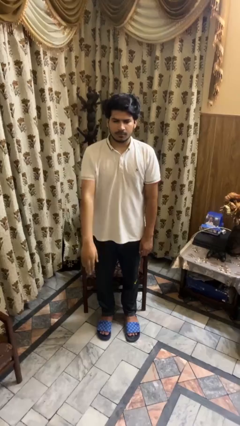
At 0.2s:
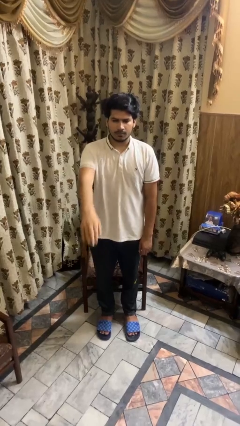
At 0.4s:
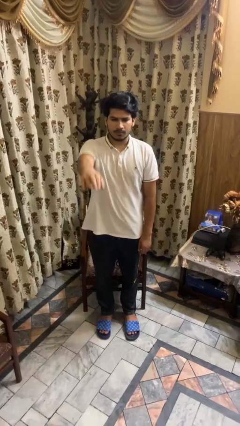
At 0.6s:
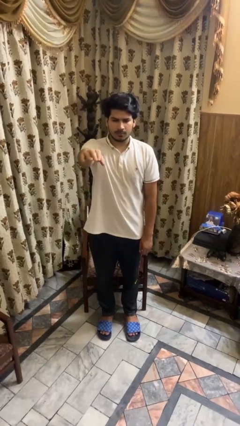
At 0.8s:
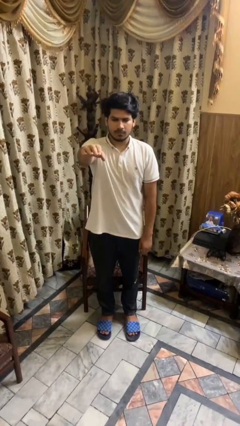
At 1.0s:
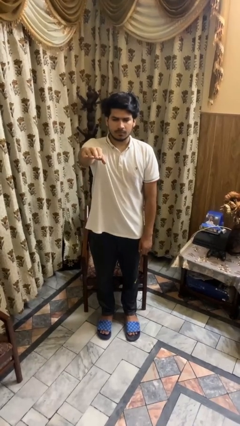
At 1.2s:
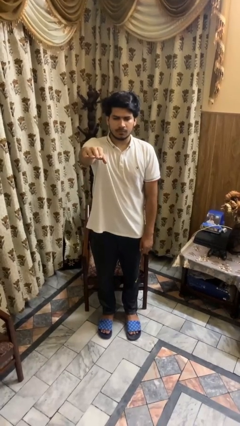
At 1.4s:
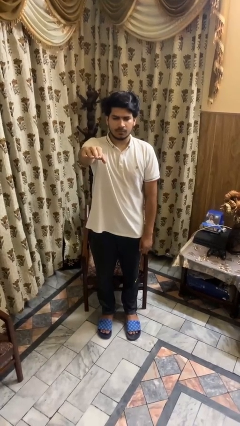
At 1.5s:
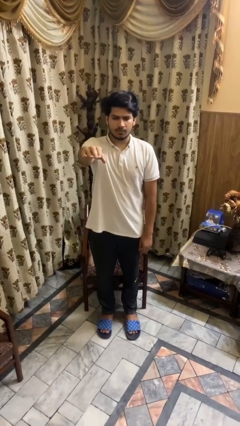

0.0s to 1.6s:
person gestures swipe up

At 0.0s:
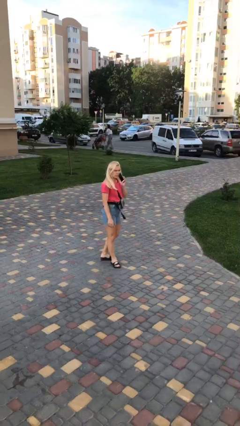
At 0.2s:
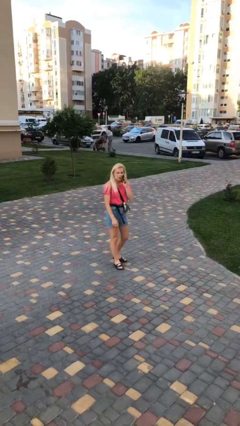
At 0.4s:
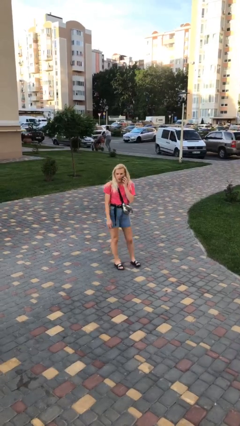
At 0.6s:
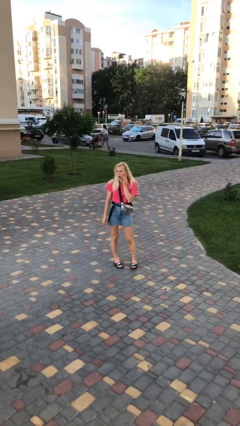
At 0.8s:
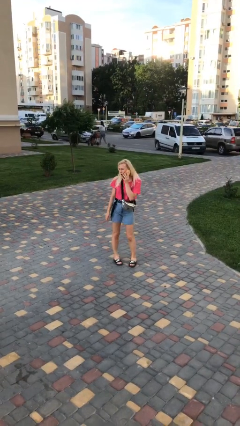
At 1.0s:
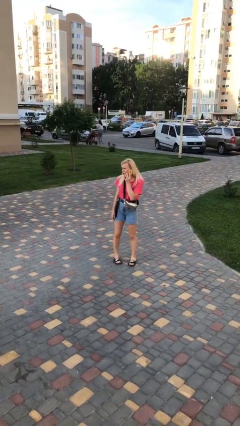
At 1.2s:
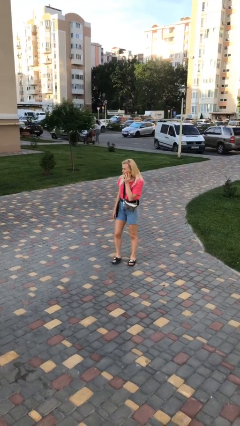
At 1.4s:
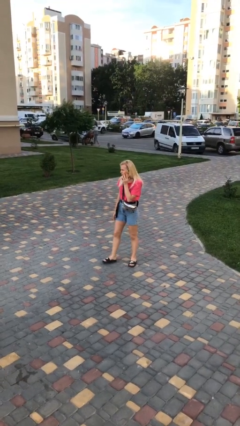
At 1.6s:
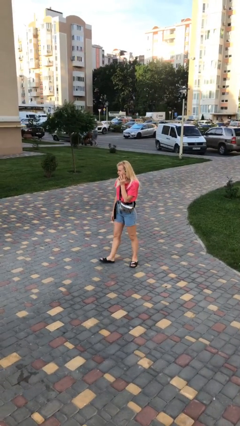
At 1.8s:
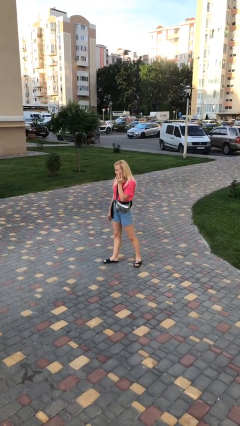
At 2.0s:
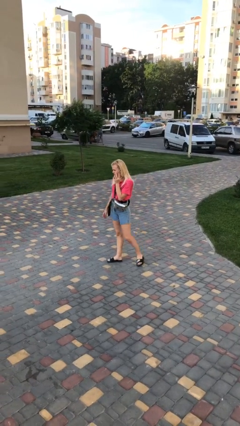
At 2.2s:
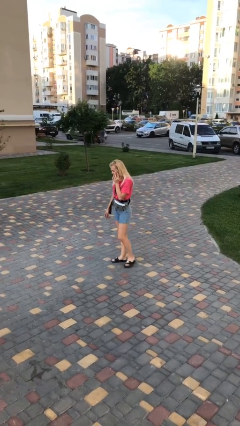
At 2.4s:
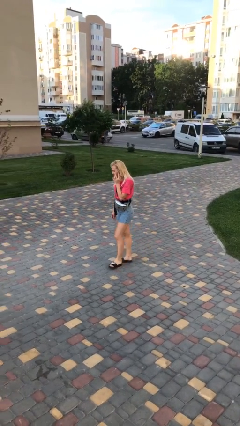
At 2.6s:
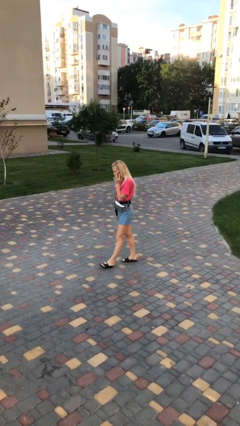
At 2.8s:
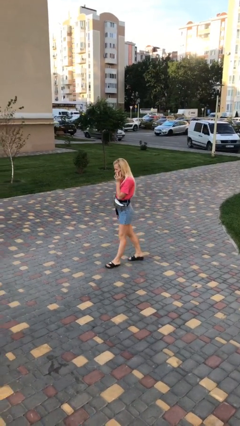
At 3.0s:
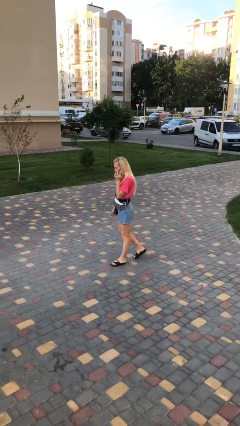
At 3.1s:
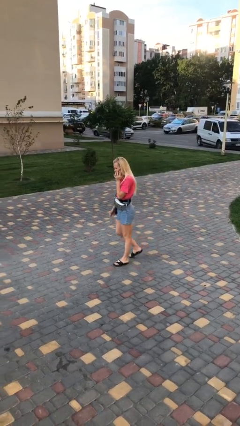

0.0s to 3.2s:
person talks on phone

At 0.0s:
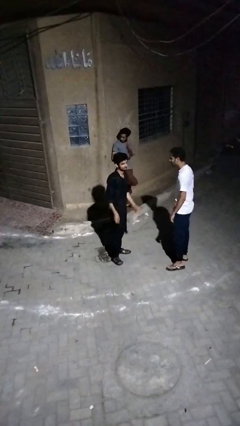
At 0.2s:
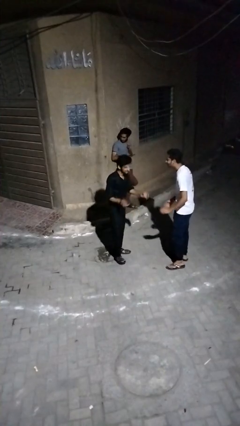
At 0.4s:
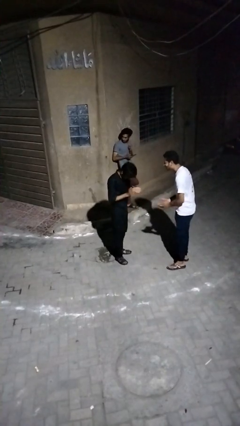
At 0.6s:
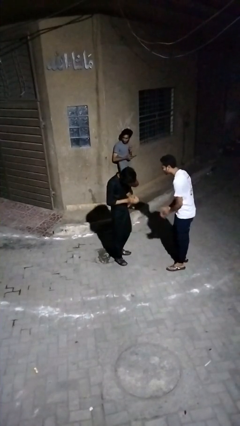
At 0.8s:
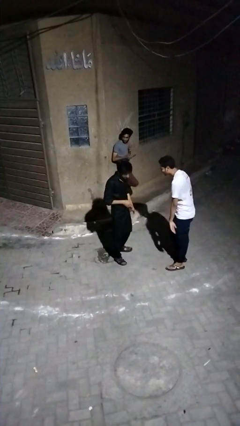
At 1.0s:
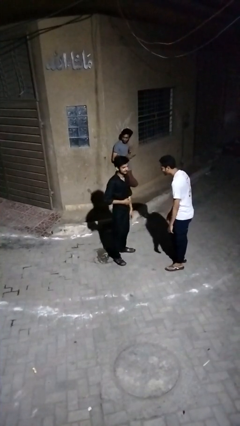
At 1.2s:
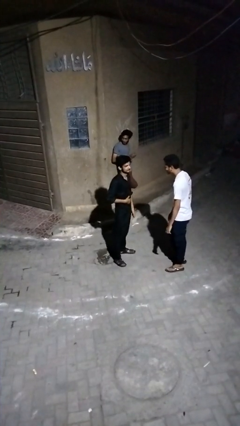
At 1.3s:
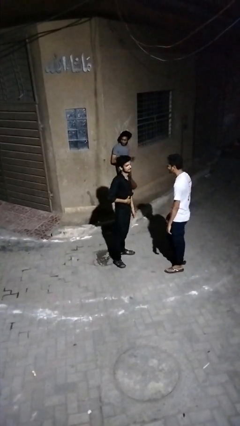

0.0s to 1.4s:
person laughs with person

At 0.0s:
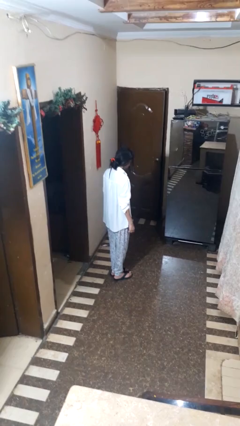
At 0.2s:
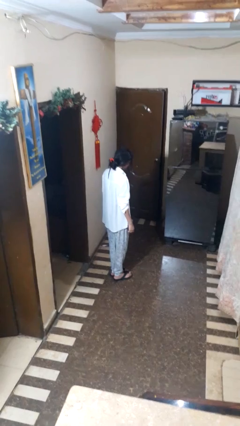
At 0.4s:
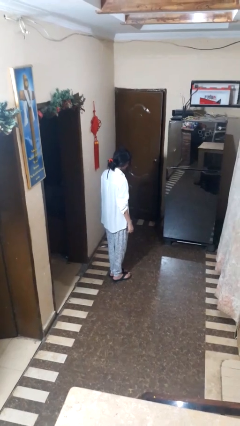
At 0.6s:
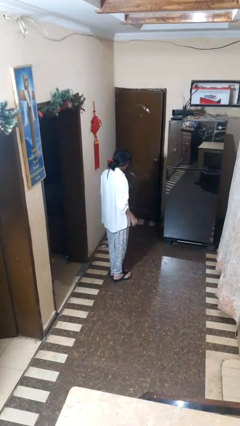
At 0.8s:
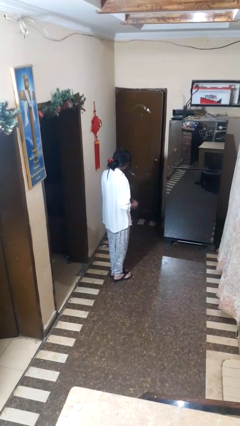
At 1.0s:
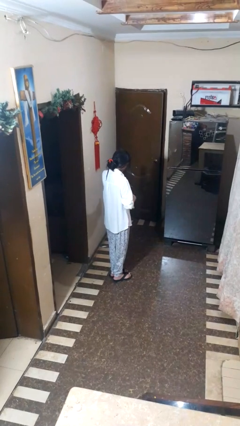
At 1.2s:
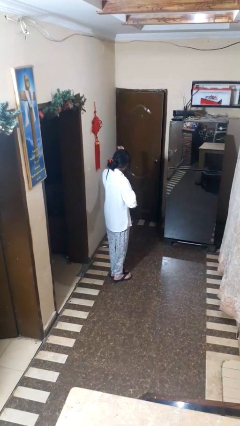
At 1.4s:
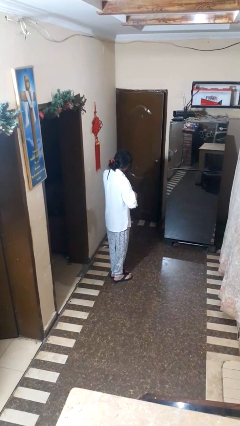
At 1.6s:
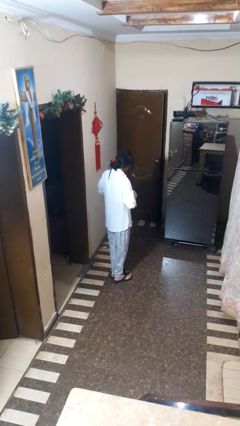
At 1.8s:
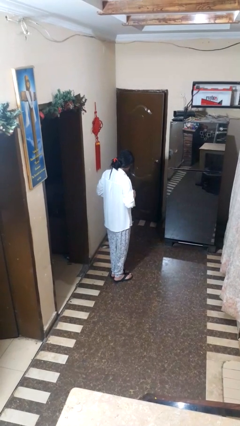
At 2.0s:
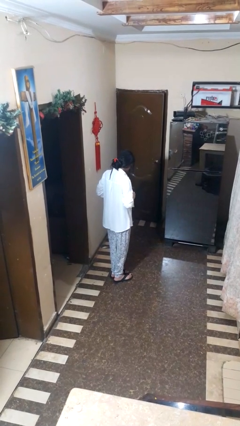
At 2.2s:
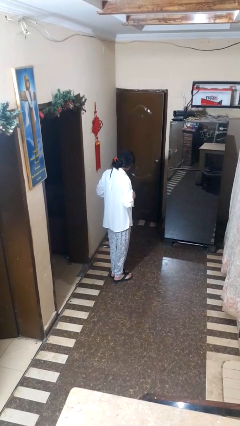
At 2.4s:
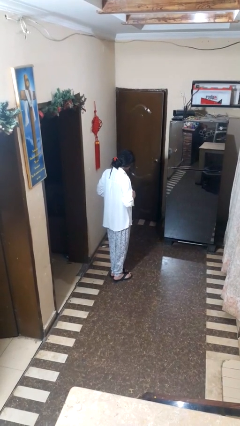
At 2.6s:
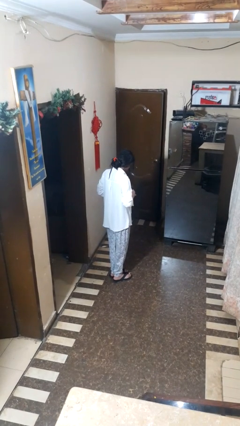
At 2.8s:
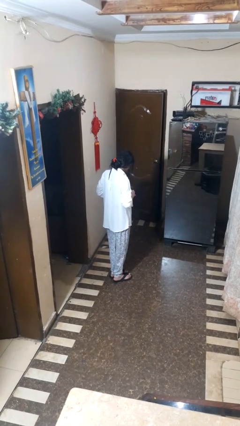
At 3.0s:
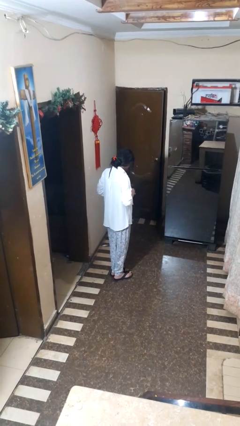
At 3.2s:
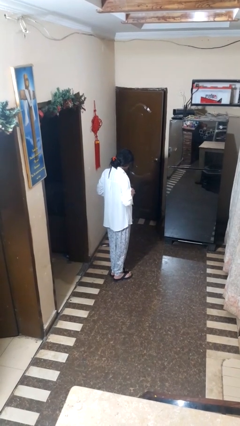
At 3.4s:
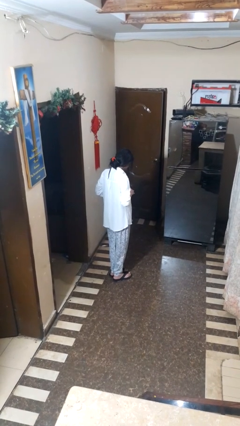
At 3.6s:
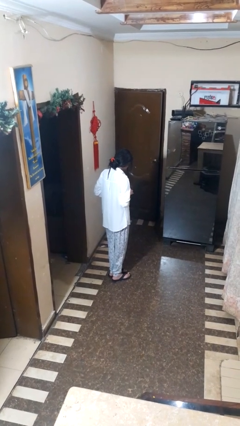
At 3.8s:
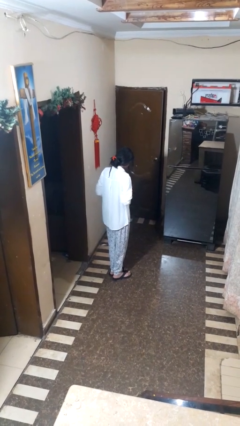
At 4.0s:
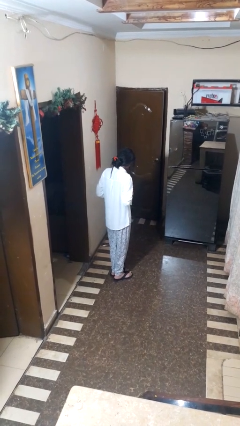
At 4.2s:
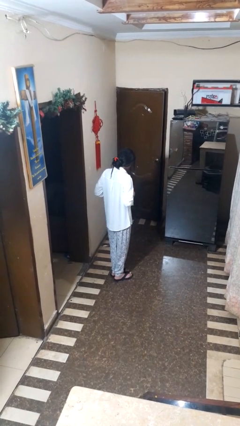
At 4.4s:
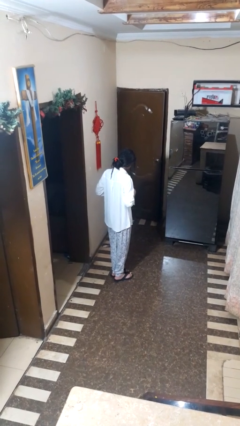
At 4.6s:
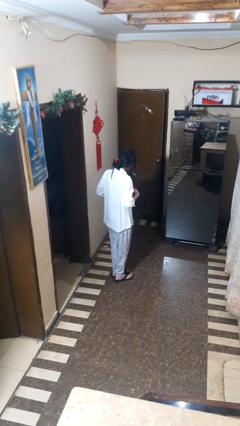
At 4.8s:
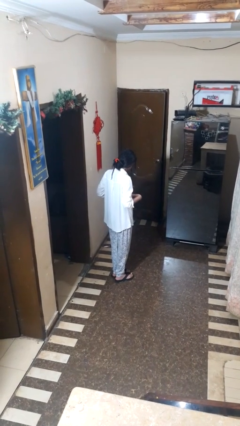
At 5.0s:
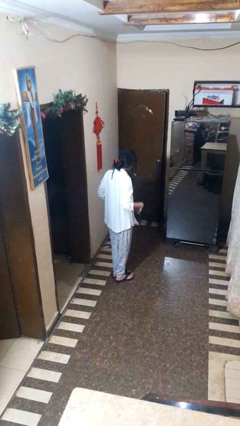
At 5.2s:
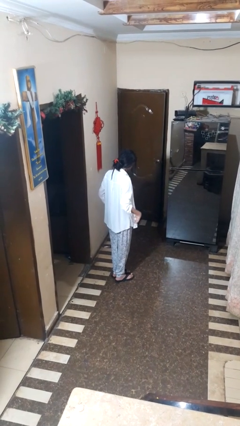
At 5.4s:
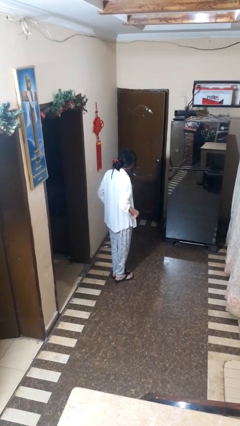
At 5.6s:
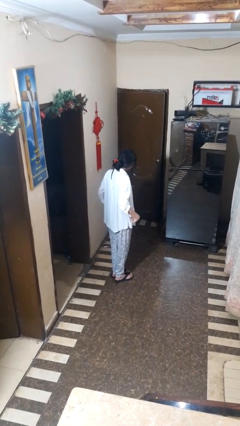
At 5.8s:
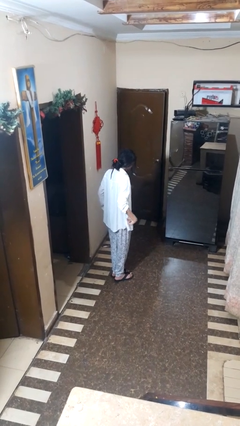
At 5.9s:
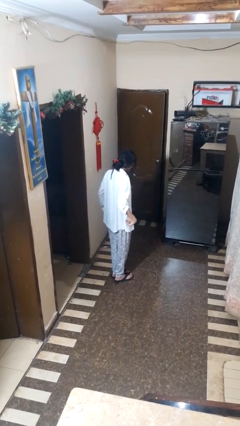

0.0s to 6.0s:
person unbuttons shirt

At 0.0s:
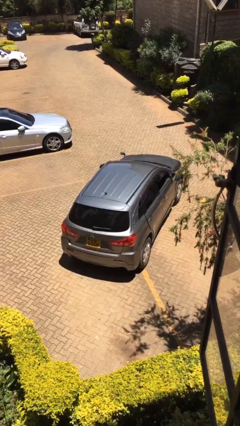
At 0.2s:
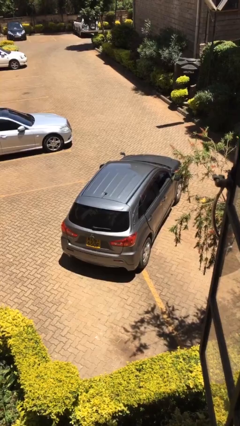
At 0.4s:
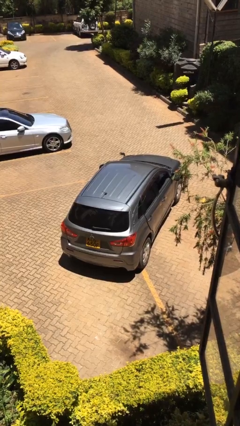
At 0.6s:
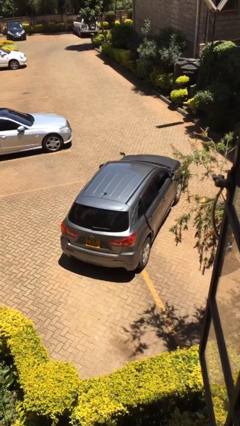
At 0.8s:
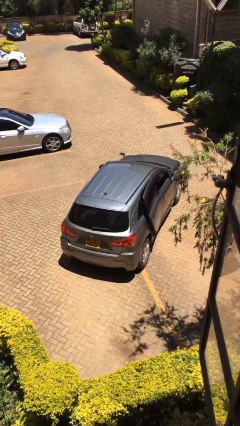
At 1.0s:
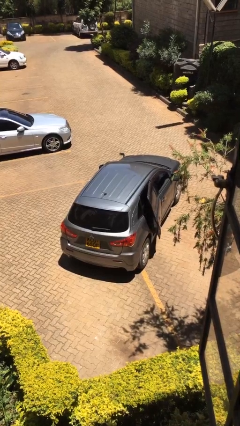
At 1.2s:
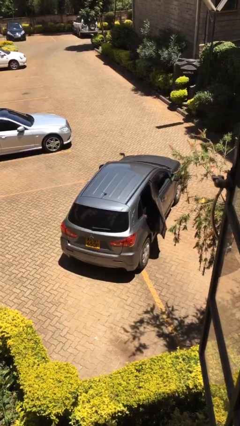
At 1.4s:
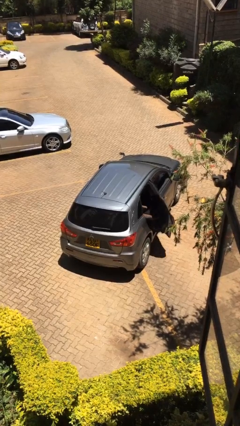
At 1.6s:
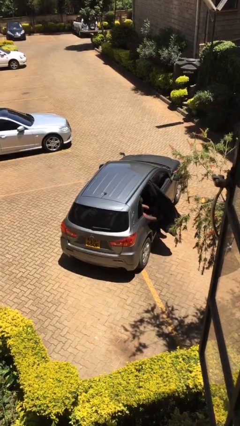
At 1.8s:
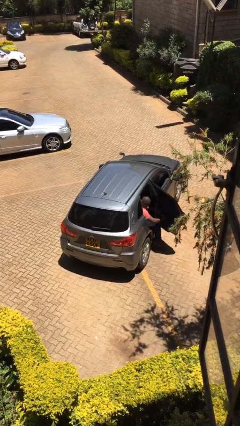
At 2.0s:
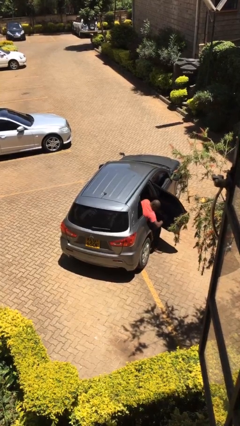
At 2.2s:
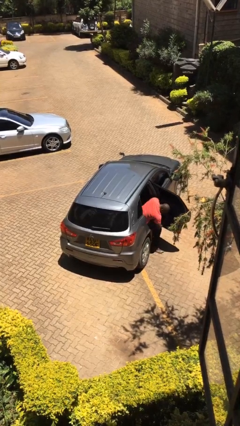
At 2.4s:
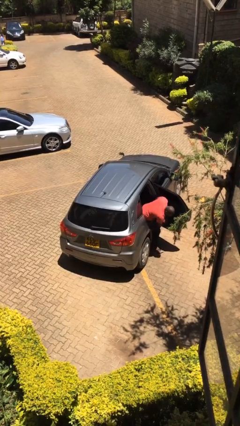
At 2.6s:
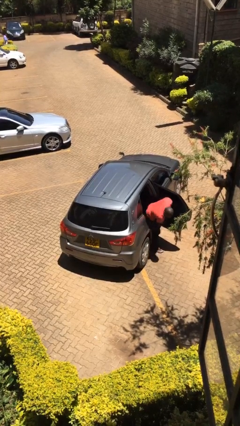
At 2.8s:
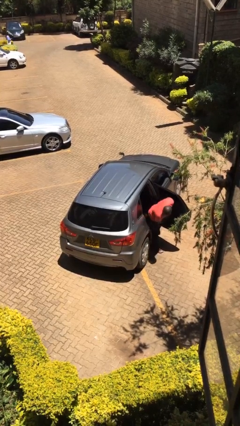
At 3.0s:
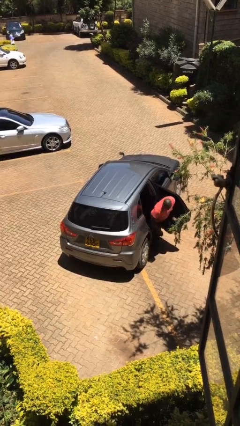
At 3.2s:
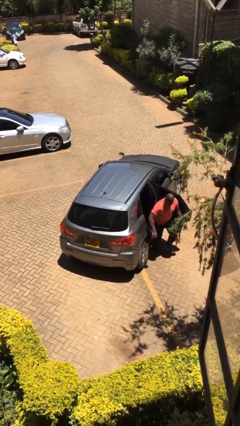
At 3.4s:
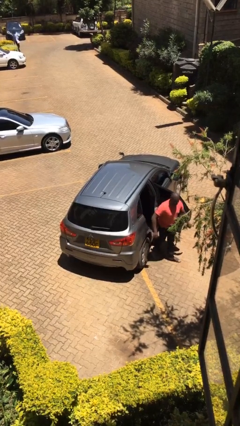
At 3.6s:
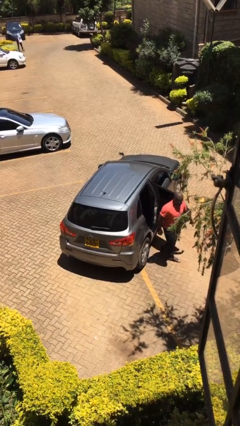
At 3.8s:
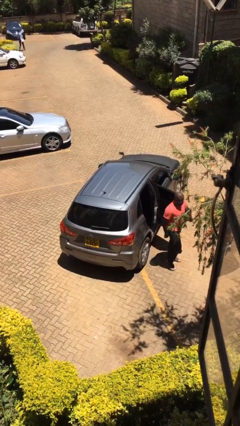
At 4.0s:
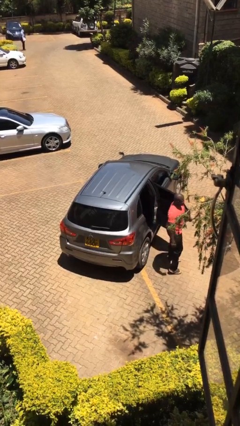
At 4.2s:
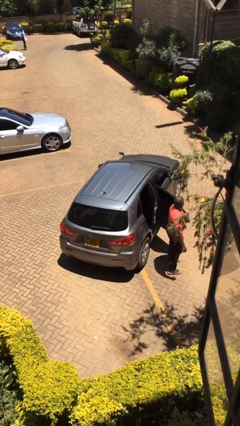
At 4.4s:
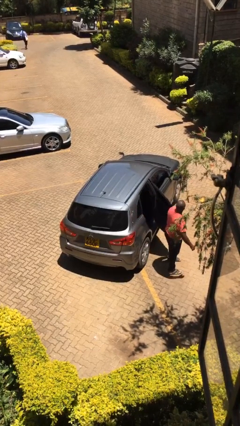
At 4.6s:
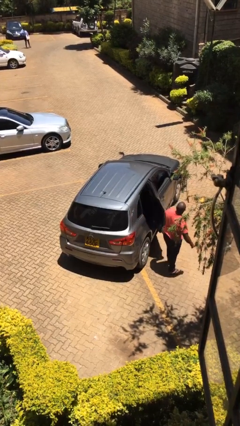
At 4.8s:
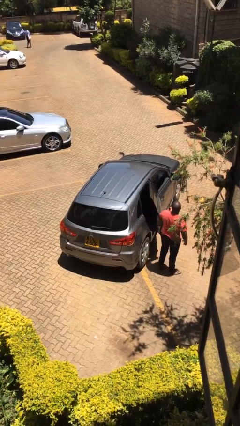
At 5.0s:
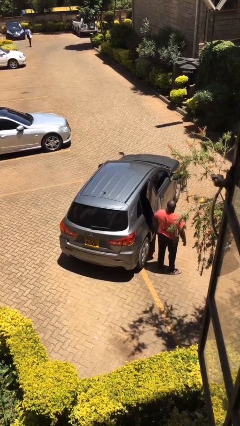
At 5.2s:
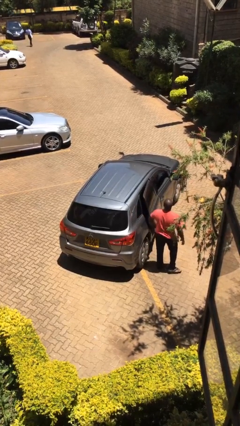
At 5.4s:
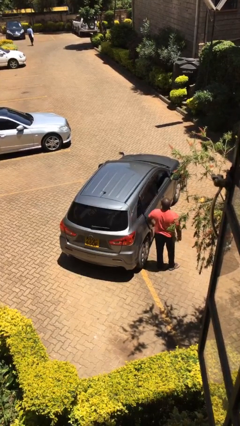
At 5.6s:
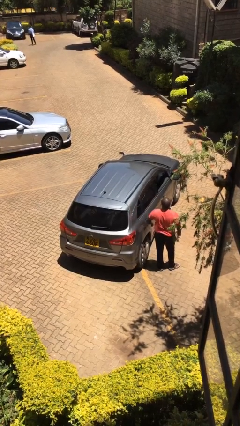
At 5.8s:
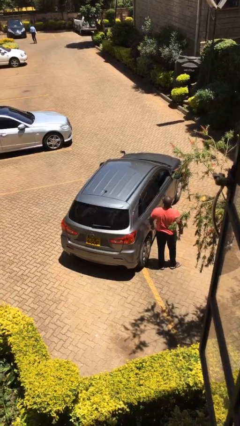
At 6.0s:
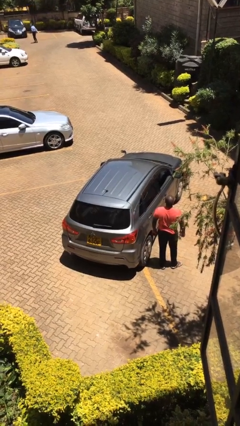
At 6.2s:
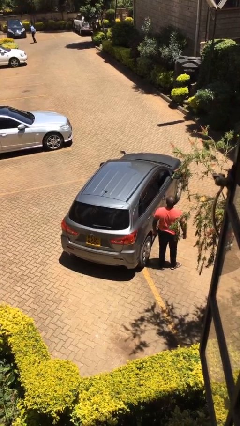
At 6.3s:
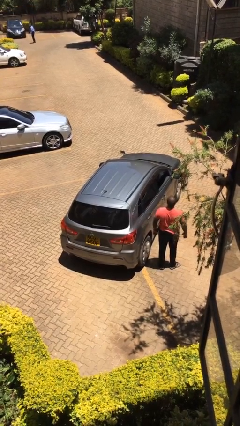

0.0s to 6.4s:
car drops off person
